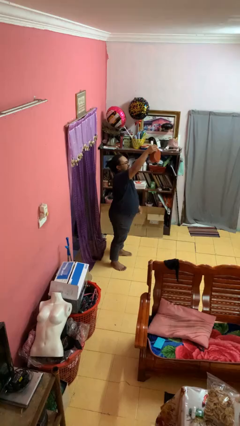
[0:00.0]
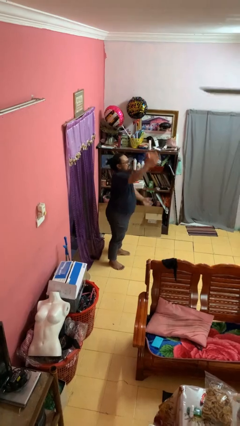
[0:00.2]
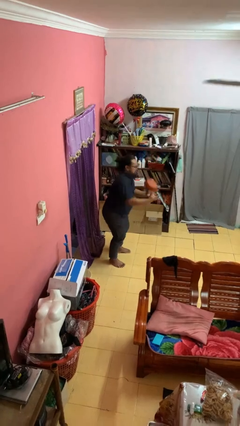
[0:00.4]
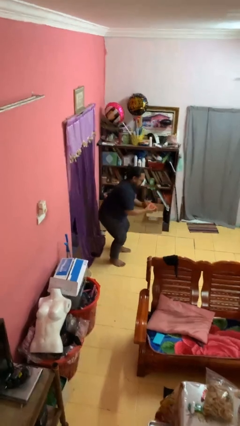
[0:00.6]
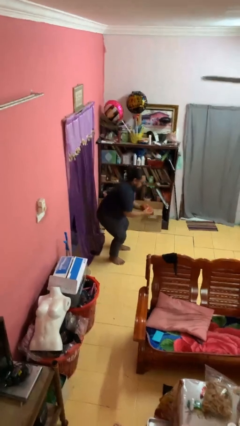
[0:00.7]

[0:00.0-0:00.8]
person drops object

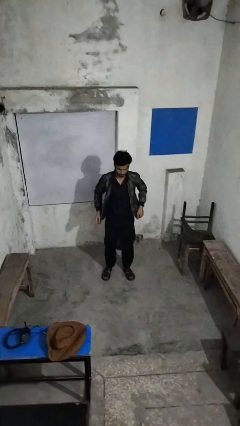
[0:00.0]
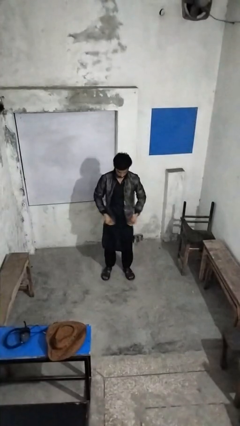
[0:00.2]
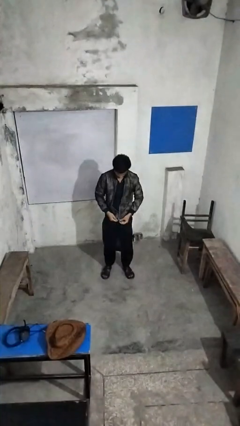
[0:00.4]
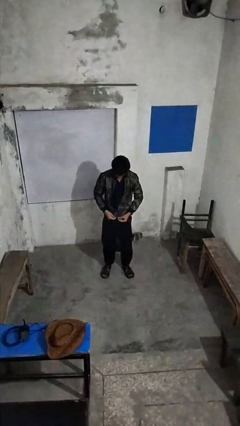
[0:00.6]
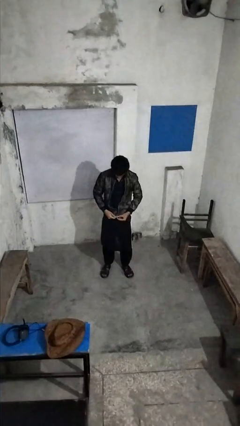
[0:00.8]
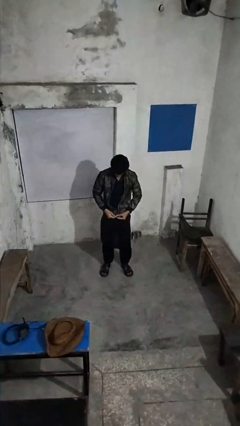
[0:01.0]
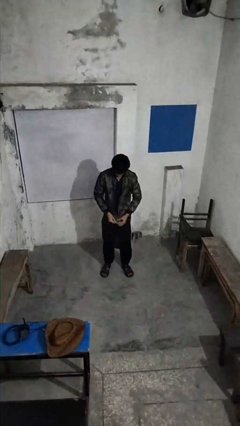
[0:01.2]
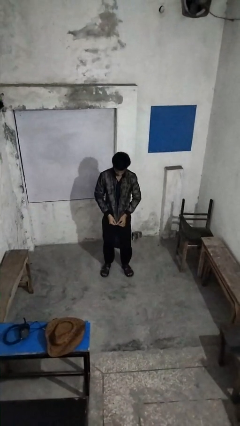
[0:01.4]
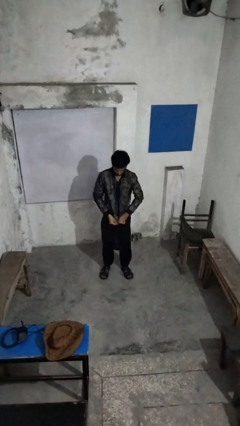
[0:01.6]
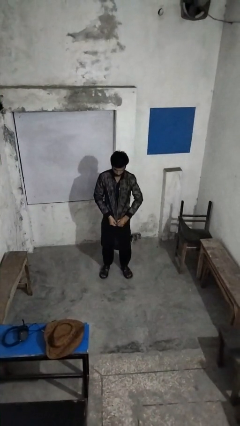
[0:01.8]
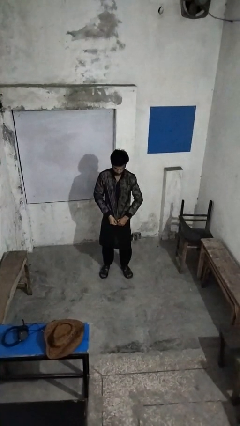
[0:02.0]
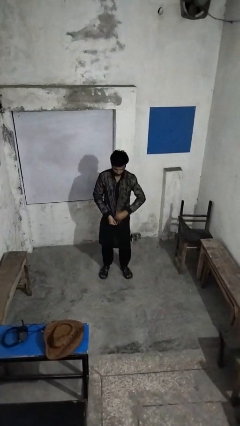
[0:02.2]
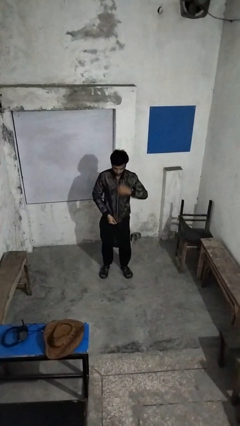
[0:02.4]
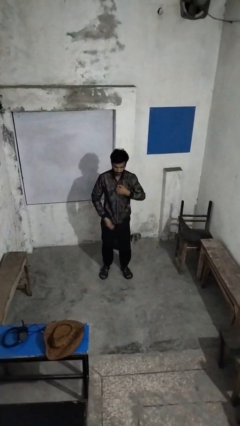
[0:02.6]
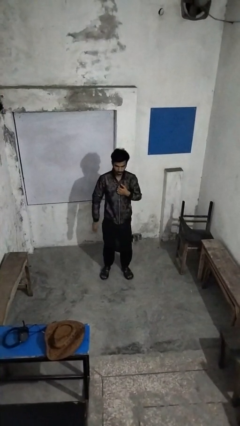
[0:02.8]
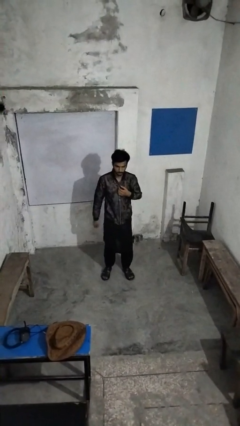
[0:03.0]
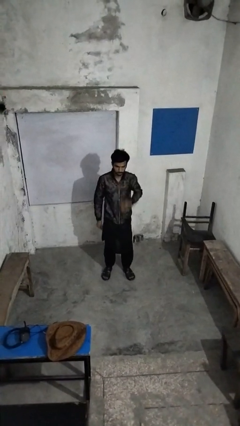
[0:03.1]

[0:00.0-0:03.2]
person zips up jacket

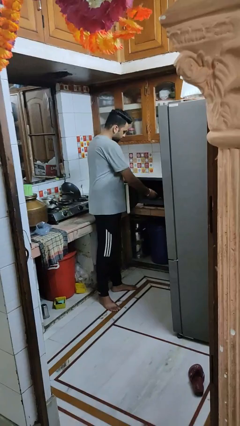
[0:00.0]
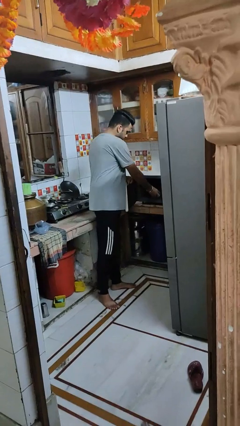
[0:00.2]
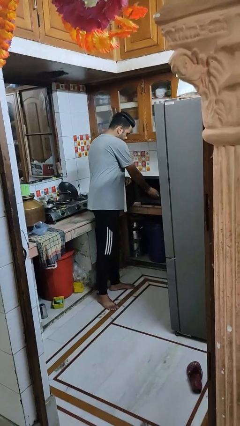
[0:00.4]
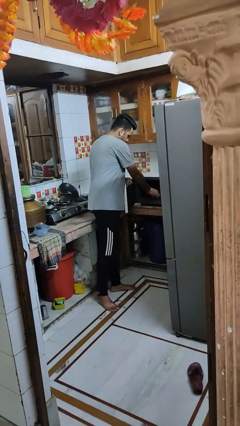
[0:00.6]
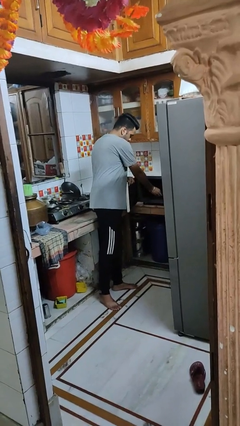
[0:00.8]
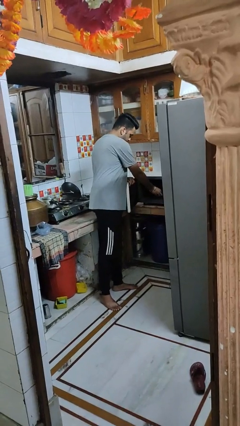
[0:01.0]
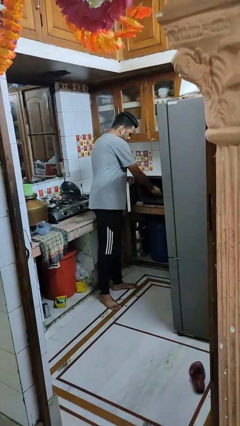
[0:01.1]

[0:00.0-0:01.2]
person puts object into microwave

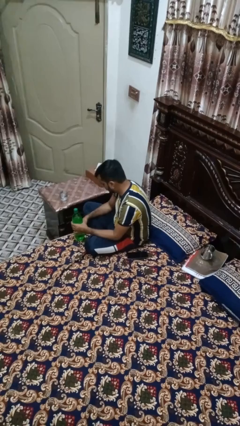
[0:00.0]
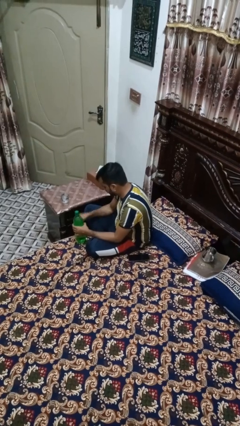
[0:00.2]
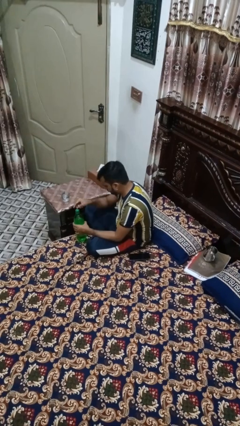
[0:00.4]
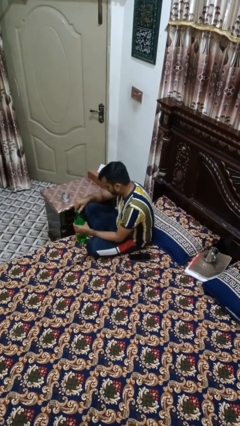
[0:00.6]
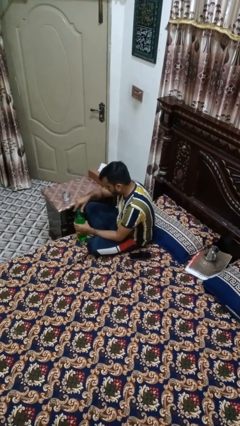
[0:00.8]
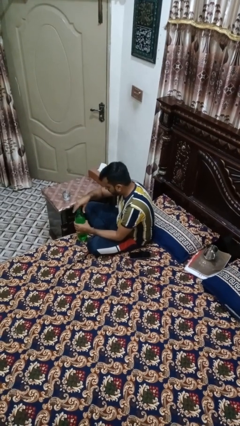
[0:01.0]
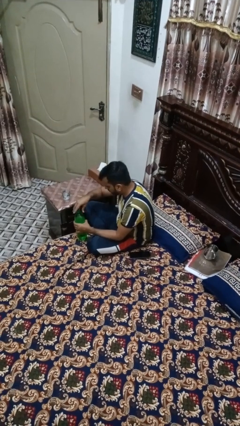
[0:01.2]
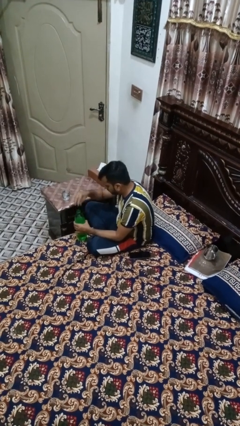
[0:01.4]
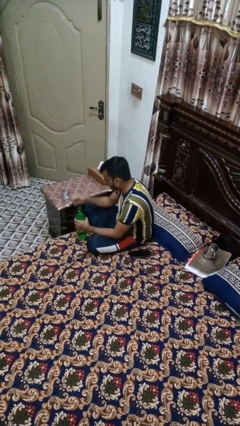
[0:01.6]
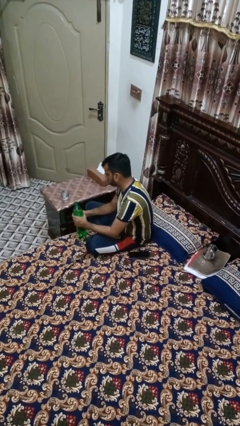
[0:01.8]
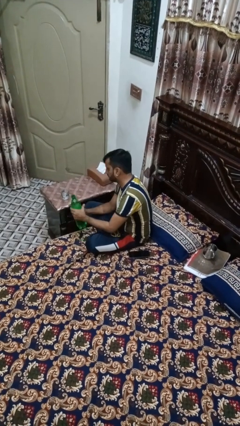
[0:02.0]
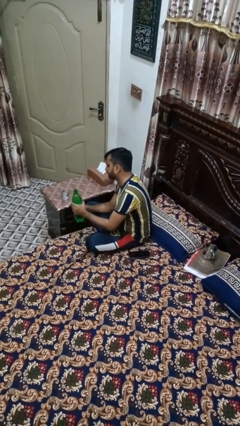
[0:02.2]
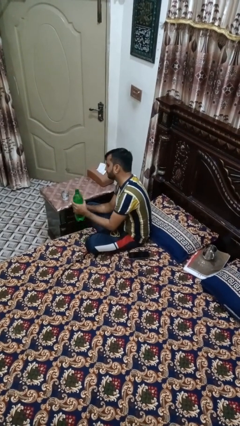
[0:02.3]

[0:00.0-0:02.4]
person unscrews lid from bottle

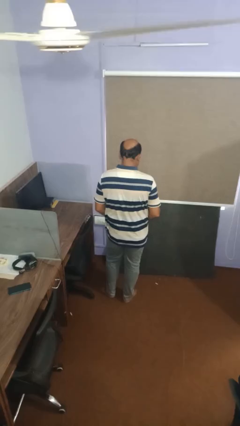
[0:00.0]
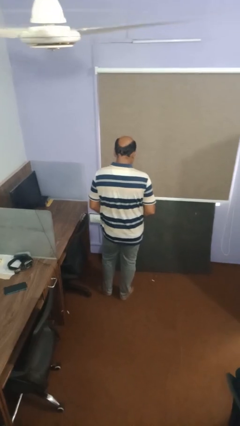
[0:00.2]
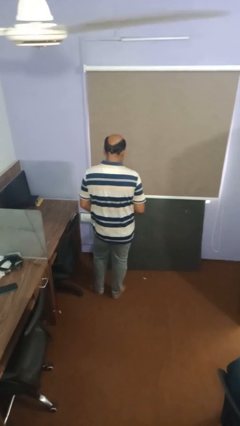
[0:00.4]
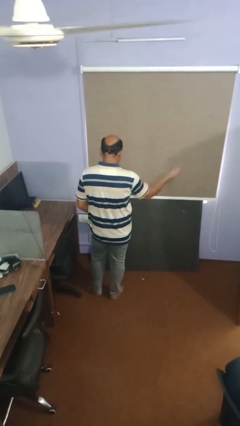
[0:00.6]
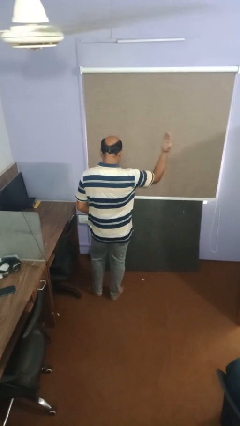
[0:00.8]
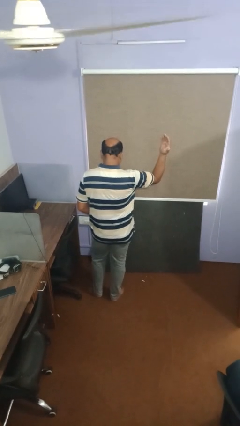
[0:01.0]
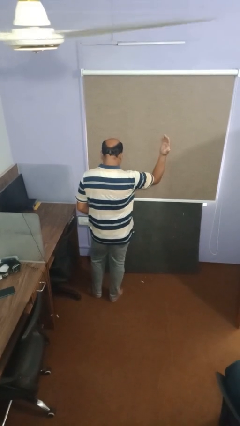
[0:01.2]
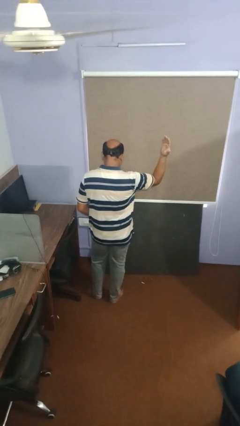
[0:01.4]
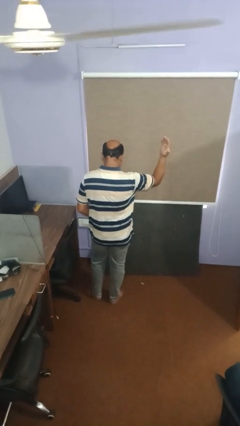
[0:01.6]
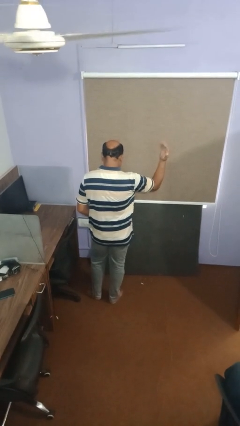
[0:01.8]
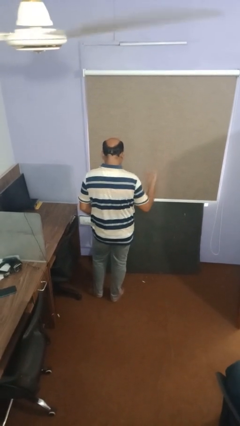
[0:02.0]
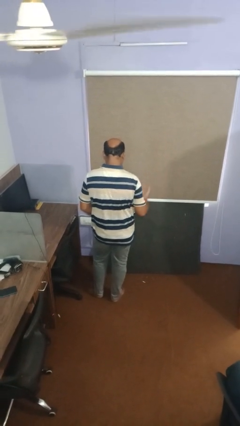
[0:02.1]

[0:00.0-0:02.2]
person gestures swipe right

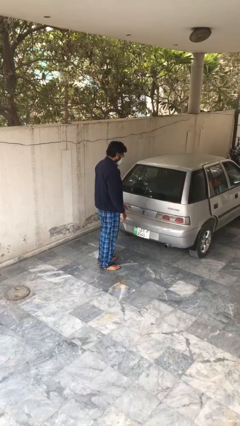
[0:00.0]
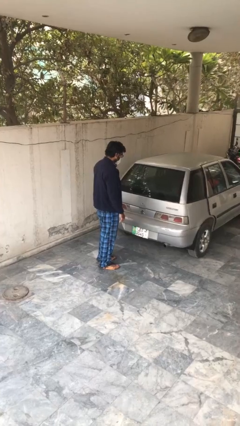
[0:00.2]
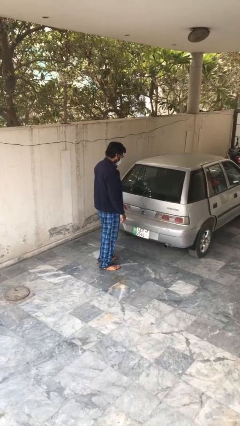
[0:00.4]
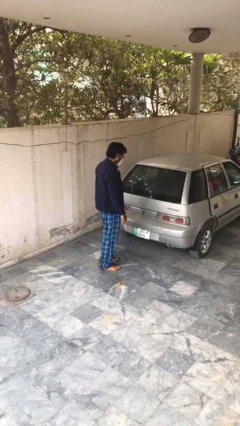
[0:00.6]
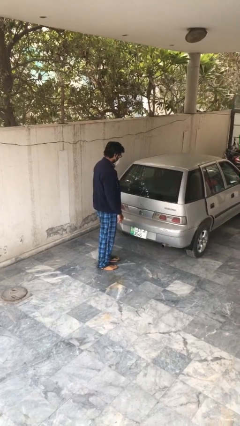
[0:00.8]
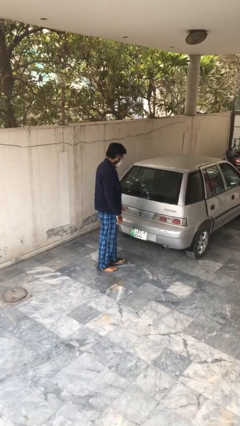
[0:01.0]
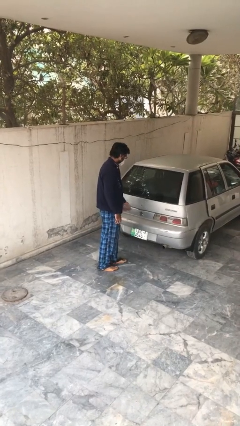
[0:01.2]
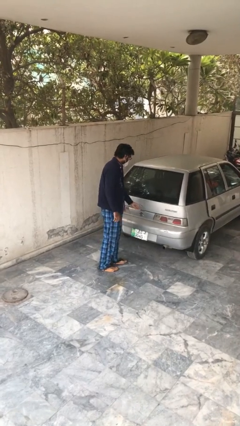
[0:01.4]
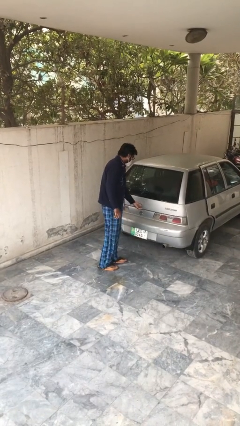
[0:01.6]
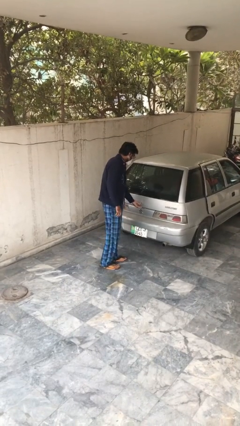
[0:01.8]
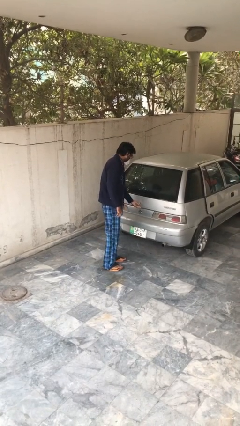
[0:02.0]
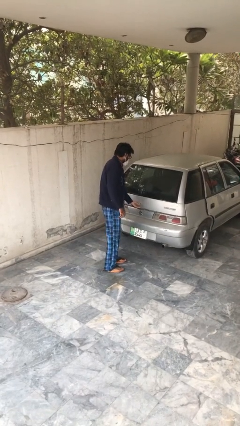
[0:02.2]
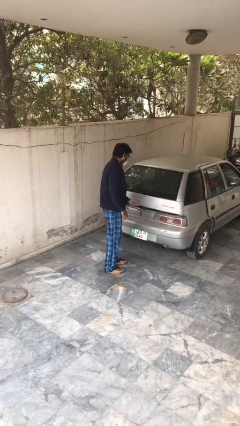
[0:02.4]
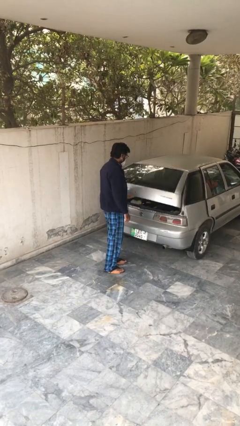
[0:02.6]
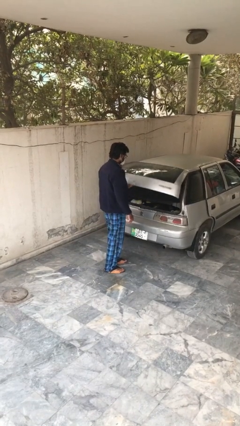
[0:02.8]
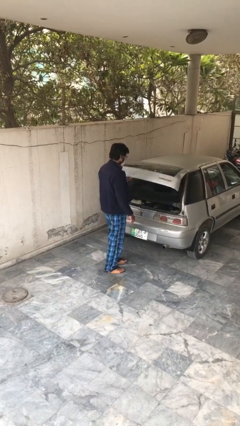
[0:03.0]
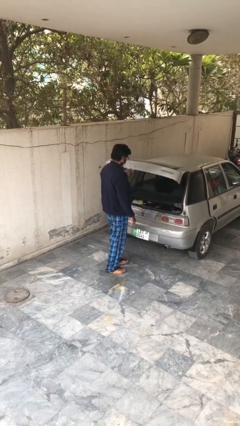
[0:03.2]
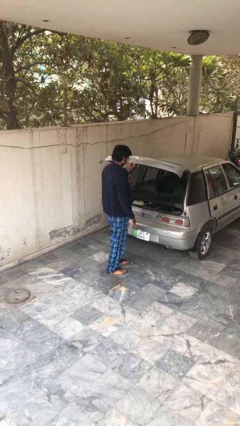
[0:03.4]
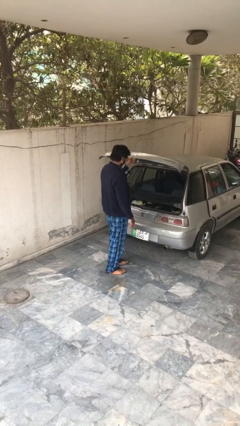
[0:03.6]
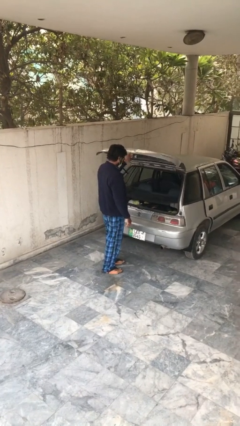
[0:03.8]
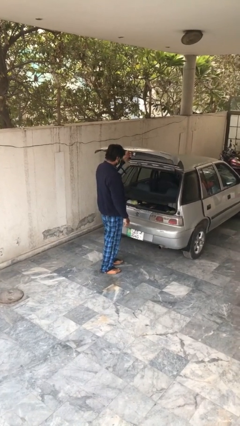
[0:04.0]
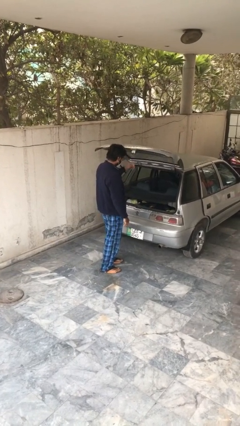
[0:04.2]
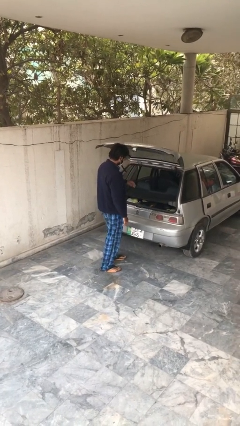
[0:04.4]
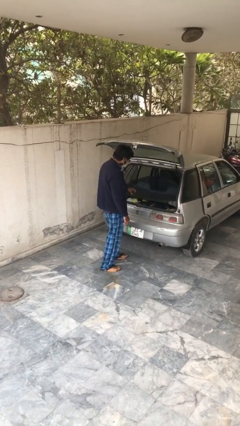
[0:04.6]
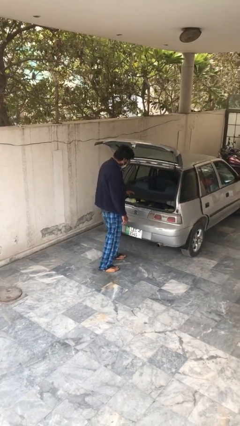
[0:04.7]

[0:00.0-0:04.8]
person opens car trunk

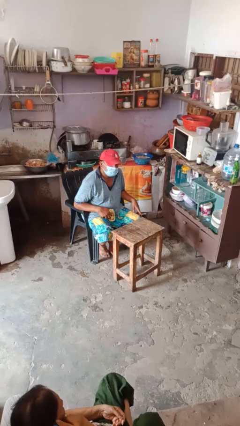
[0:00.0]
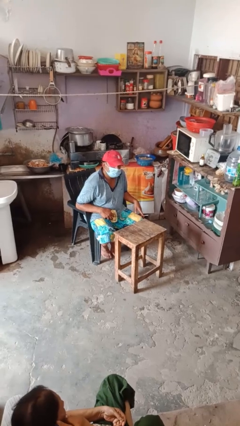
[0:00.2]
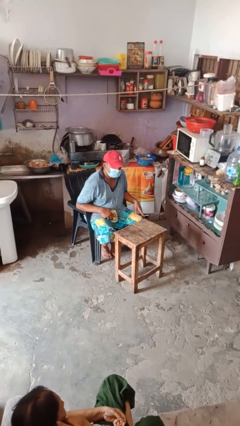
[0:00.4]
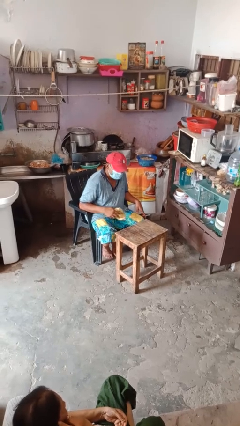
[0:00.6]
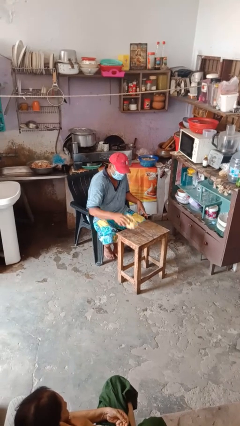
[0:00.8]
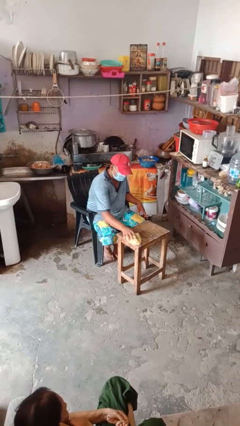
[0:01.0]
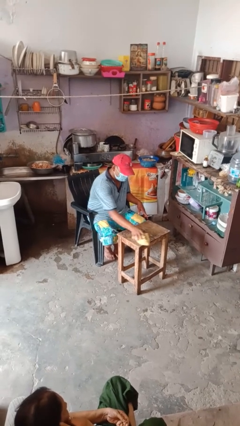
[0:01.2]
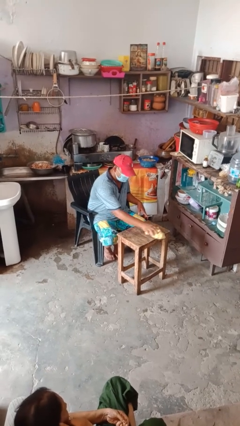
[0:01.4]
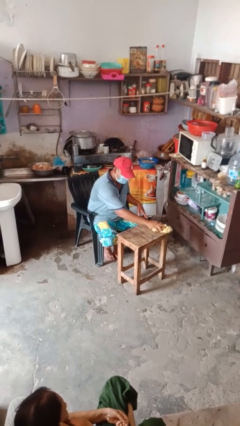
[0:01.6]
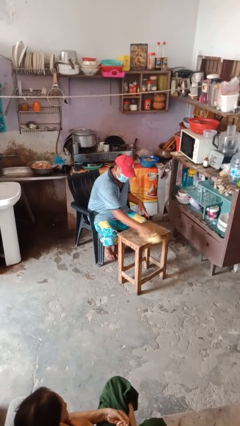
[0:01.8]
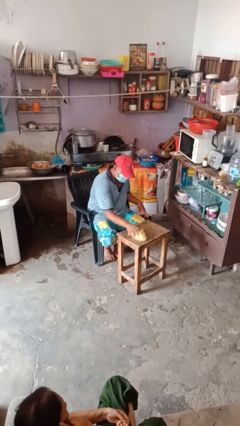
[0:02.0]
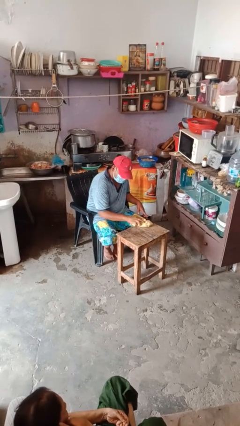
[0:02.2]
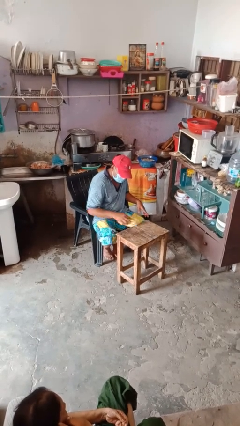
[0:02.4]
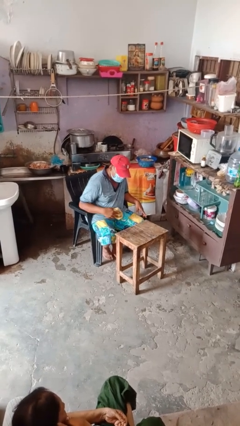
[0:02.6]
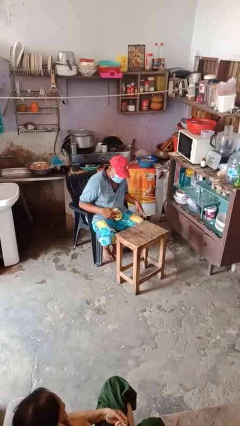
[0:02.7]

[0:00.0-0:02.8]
person cleans table with rag
